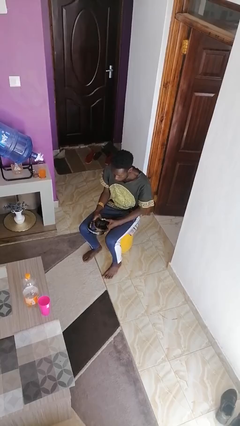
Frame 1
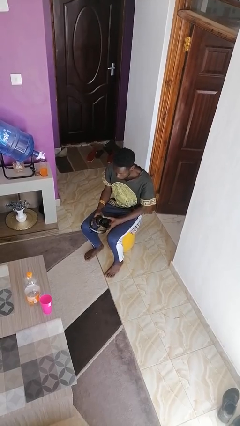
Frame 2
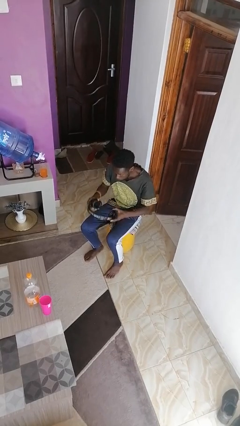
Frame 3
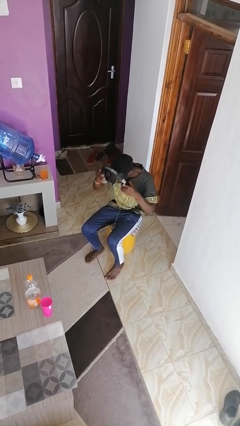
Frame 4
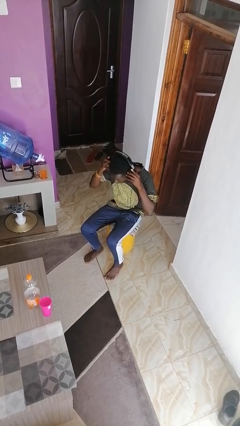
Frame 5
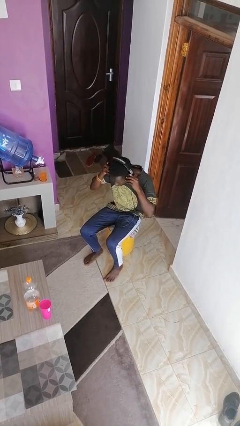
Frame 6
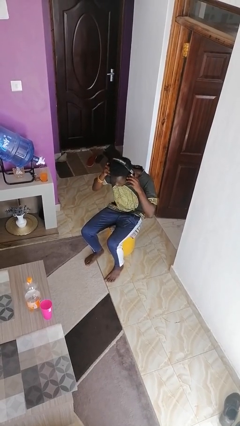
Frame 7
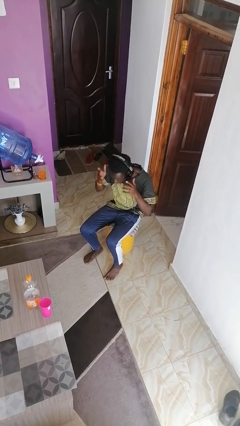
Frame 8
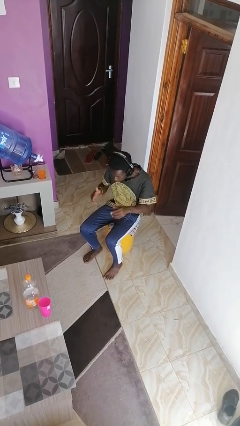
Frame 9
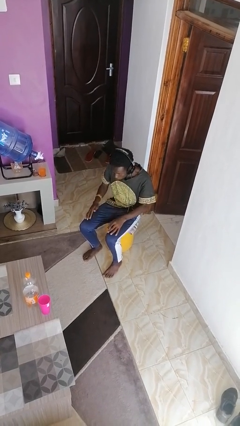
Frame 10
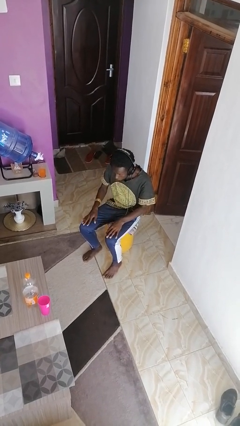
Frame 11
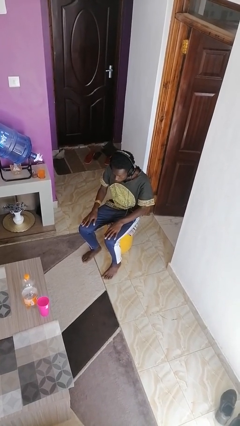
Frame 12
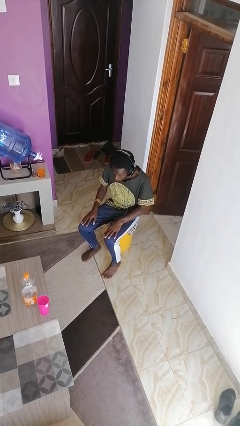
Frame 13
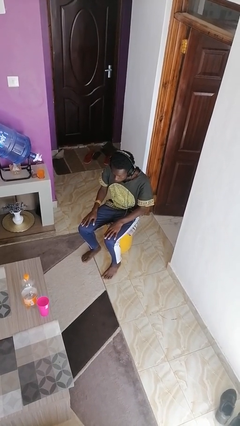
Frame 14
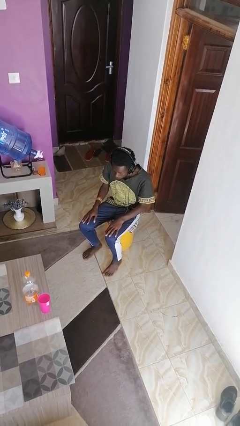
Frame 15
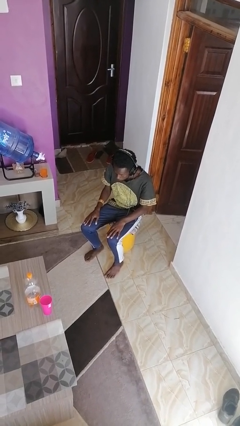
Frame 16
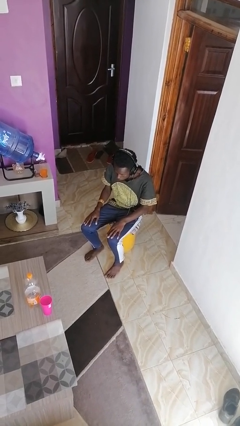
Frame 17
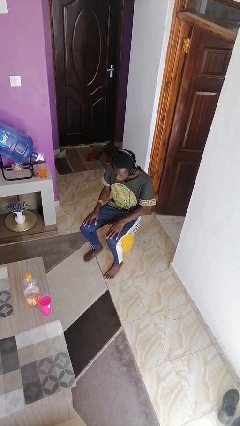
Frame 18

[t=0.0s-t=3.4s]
person puts on headphones

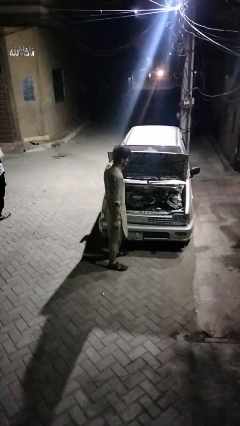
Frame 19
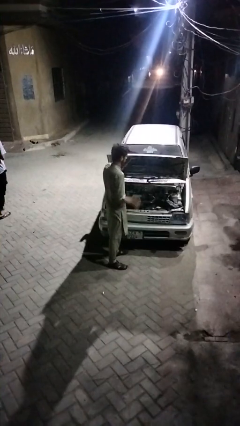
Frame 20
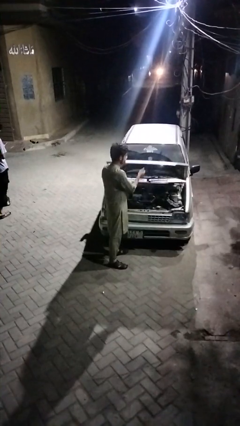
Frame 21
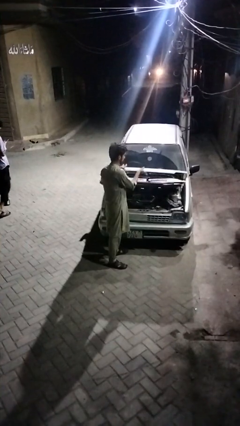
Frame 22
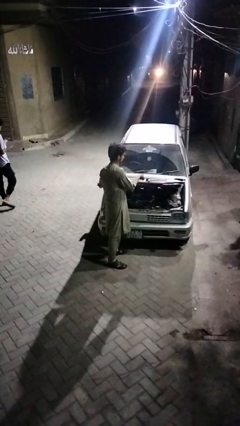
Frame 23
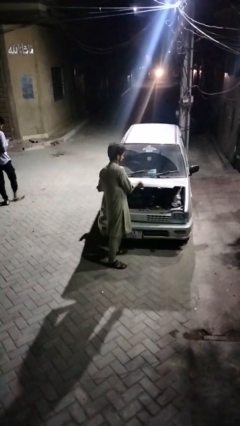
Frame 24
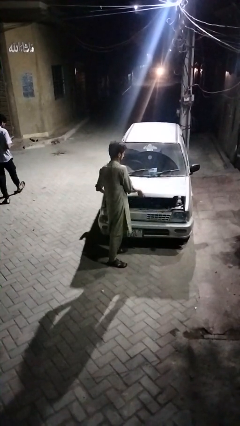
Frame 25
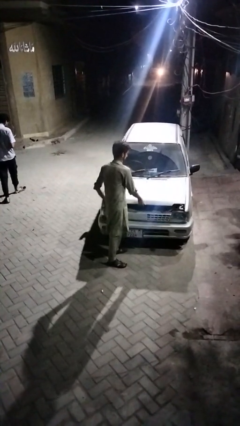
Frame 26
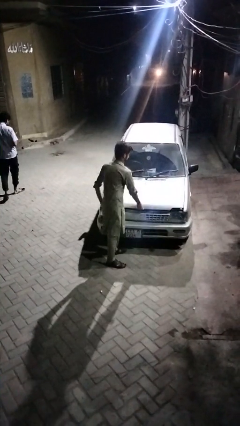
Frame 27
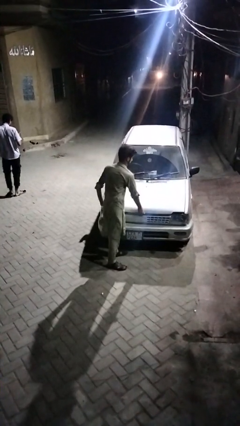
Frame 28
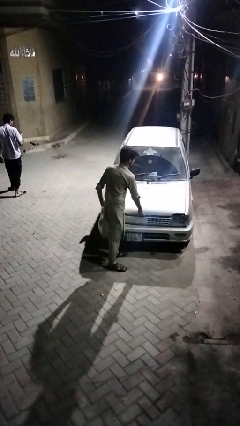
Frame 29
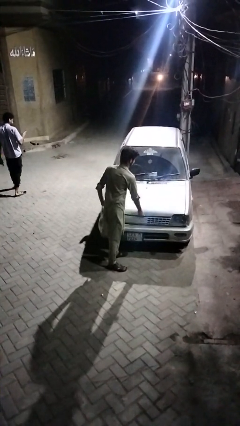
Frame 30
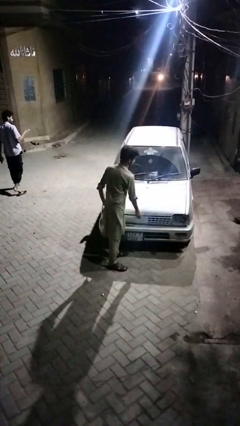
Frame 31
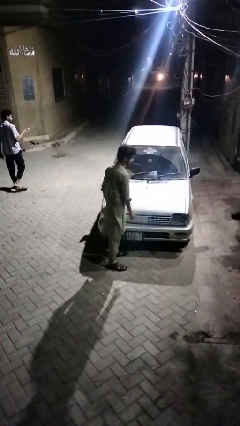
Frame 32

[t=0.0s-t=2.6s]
person closes car hood

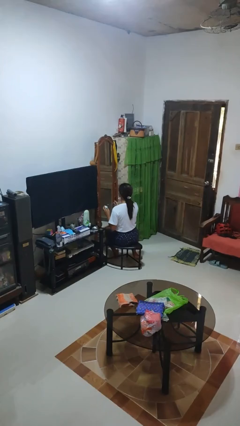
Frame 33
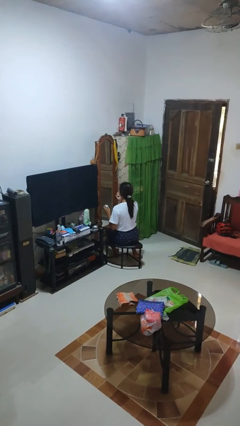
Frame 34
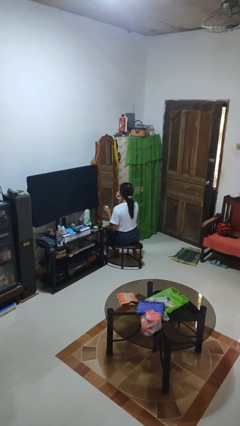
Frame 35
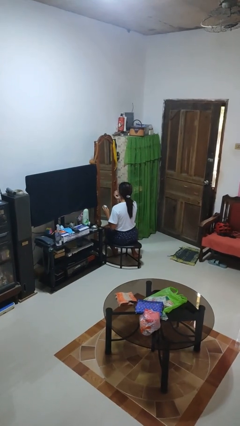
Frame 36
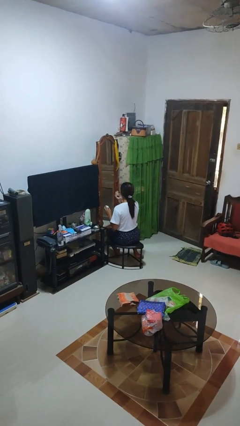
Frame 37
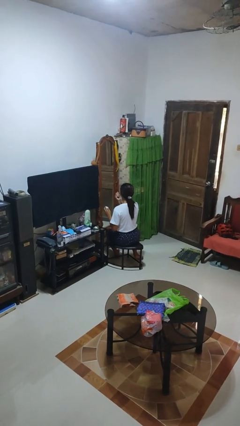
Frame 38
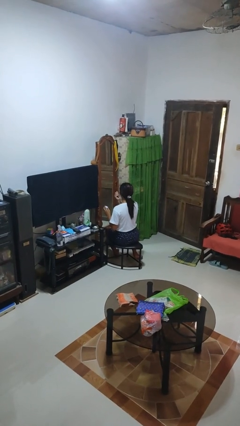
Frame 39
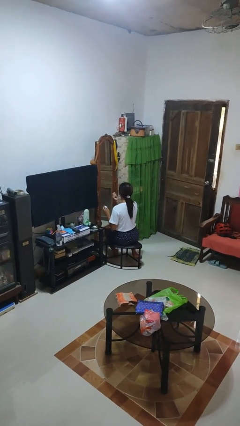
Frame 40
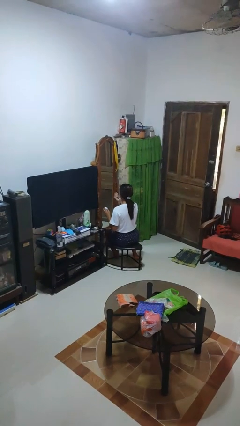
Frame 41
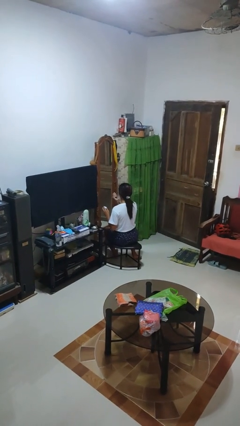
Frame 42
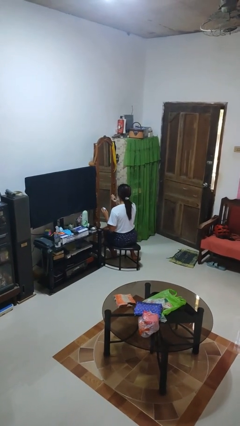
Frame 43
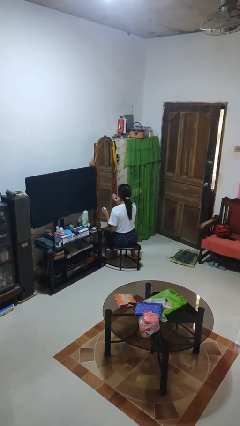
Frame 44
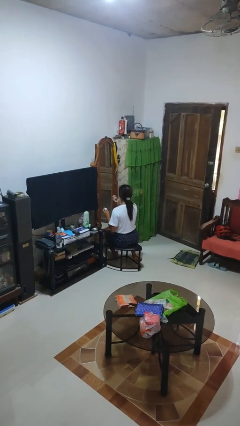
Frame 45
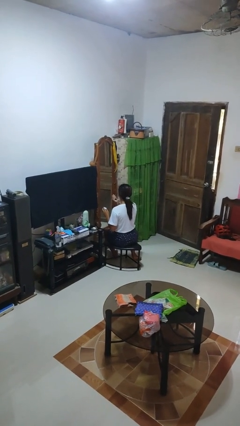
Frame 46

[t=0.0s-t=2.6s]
person applies eye makeup

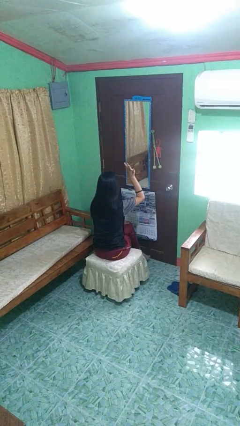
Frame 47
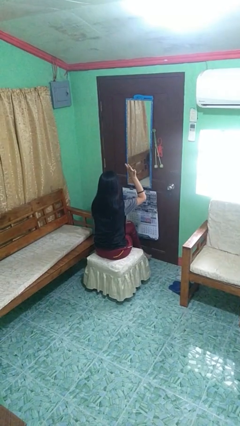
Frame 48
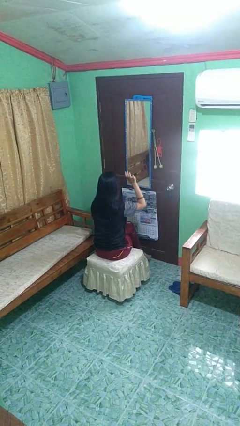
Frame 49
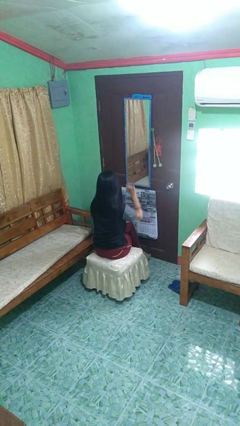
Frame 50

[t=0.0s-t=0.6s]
person gestures lower hand

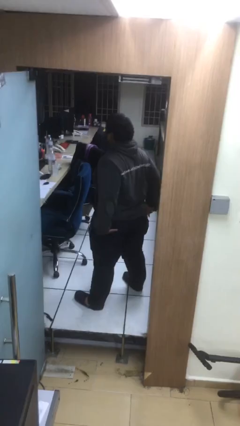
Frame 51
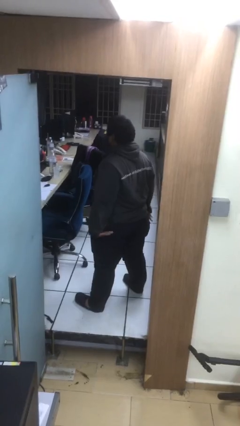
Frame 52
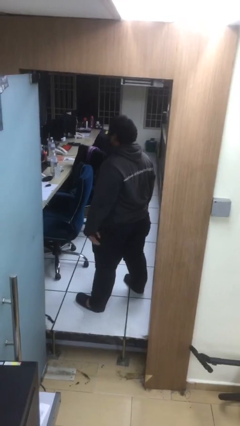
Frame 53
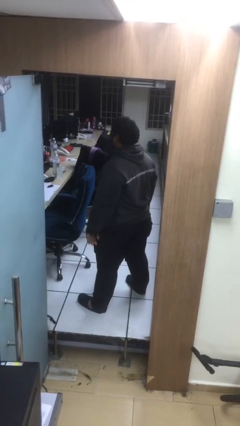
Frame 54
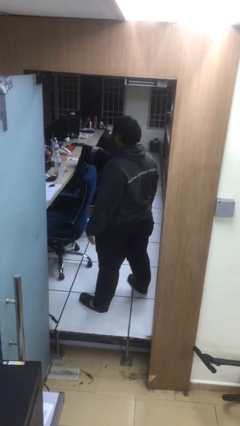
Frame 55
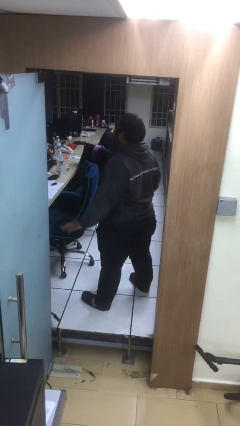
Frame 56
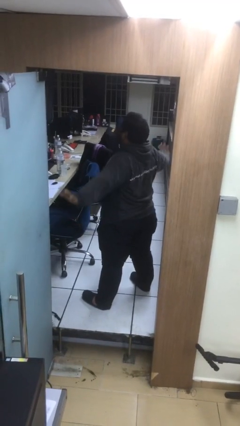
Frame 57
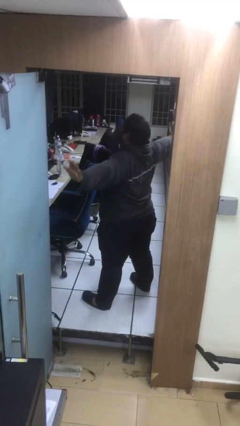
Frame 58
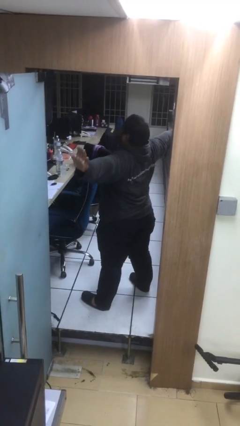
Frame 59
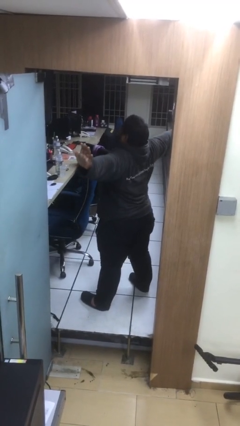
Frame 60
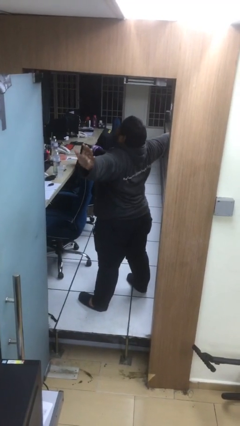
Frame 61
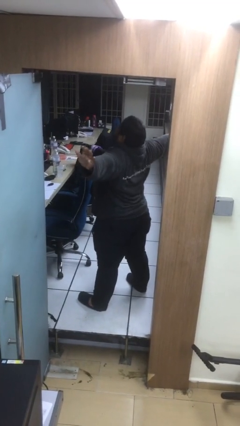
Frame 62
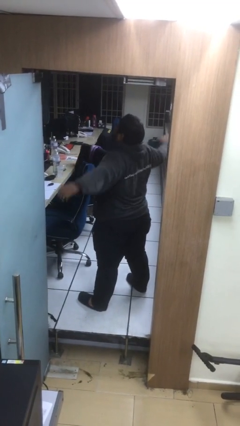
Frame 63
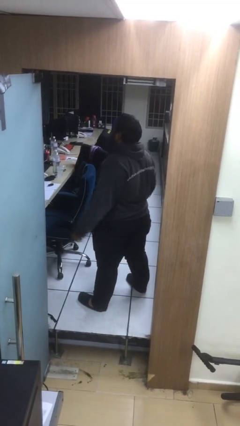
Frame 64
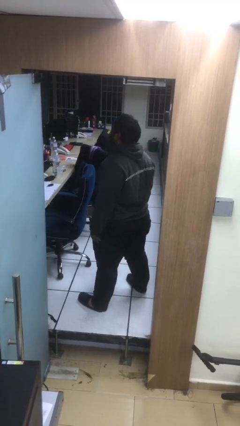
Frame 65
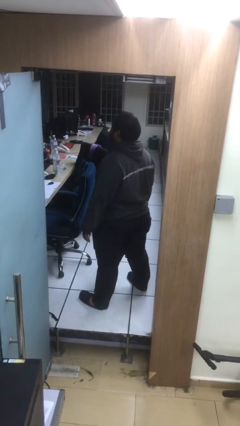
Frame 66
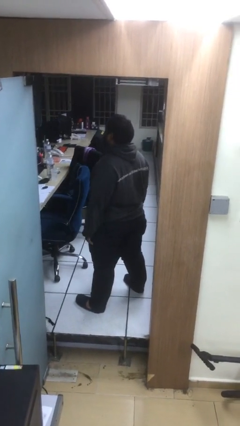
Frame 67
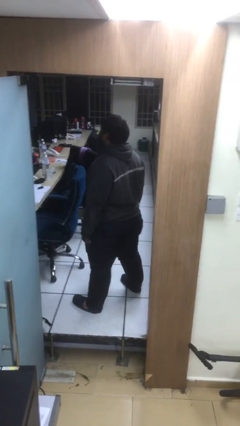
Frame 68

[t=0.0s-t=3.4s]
person stretches arms to side

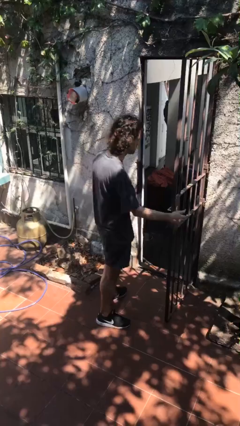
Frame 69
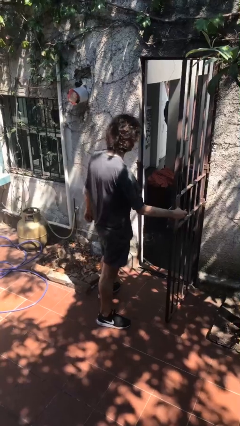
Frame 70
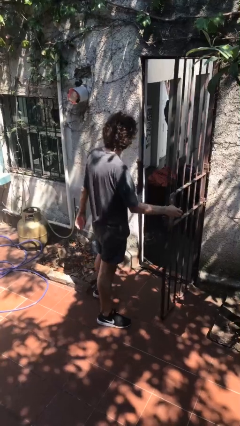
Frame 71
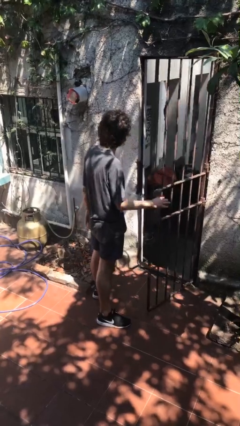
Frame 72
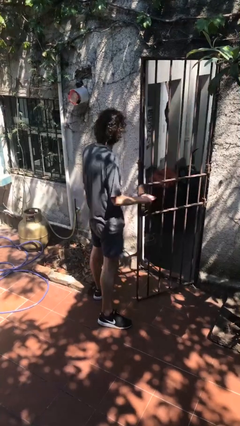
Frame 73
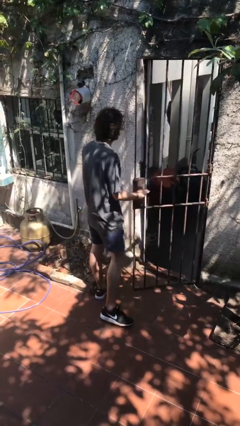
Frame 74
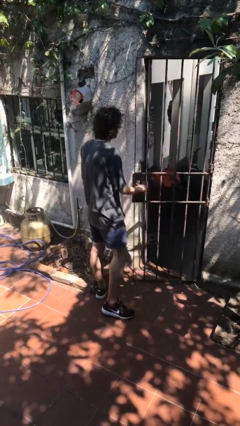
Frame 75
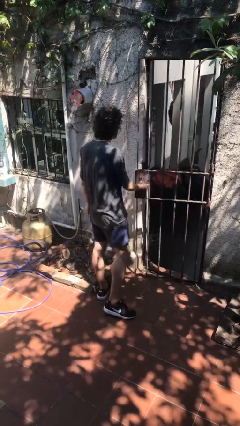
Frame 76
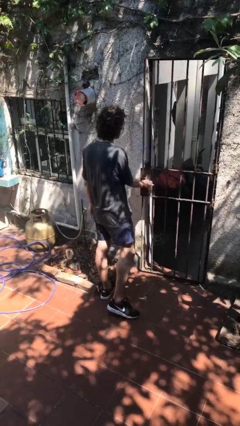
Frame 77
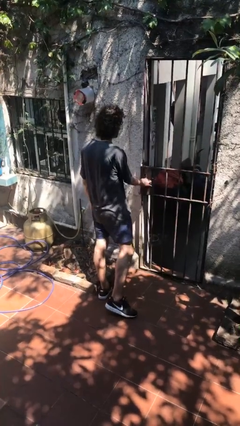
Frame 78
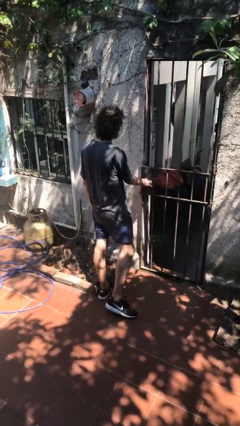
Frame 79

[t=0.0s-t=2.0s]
person closes facility door

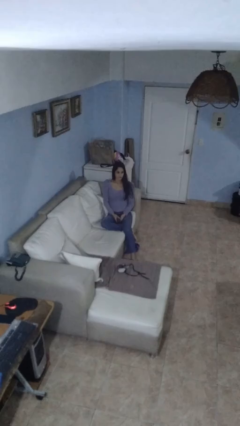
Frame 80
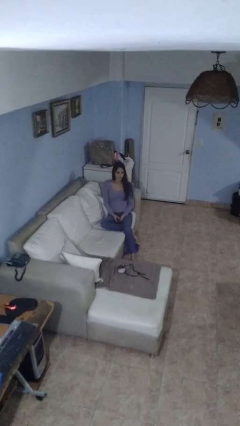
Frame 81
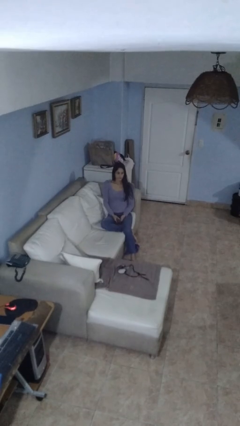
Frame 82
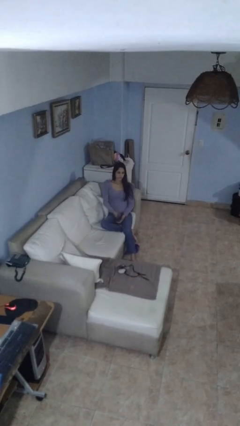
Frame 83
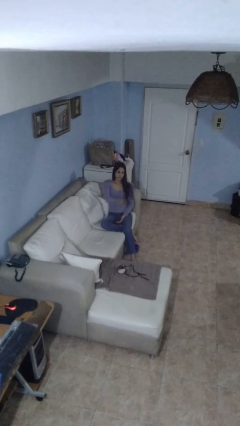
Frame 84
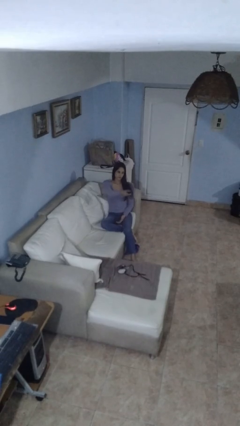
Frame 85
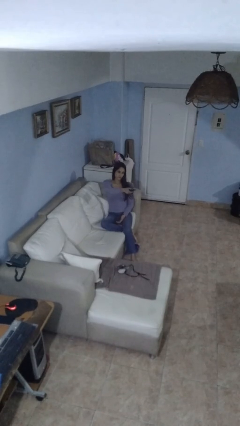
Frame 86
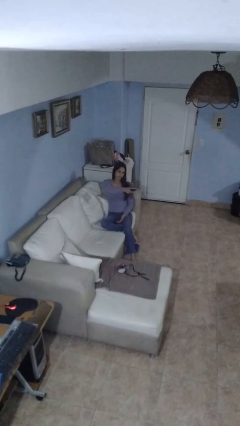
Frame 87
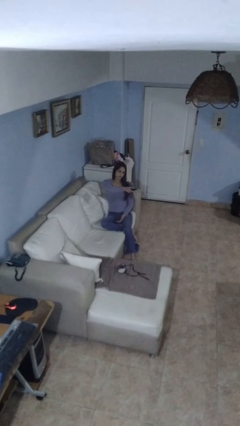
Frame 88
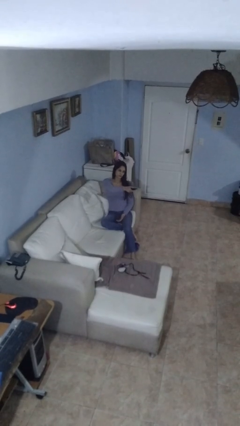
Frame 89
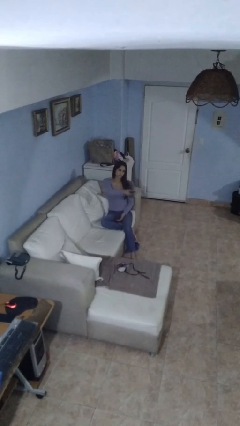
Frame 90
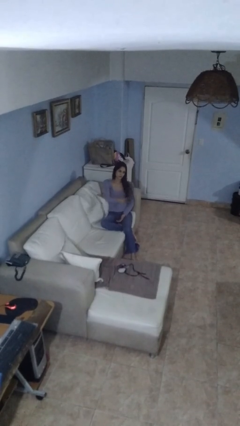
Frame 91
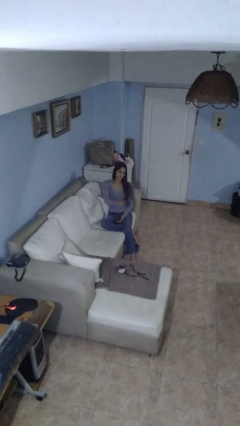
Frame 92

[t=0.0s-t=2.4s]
person uses television remote
